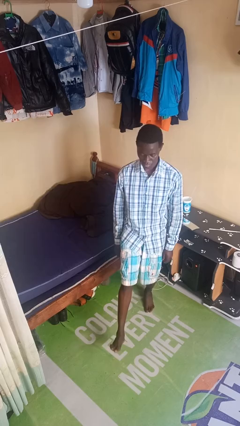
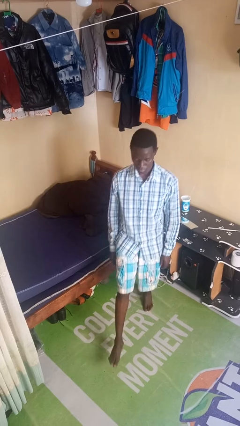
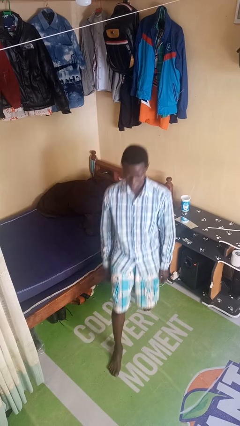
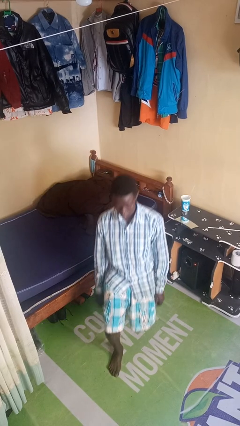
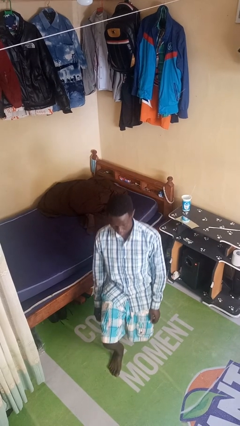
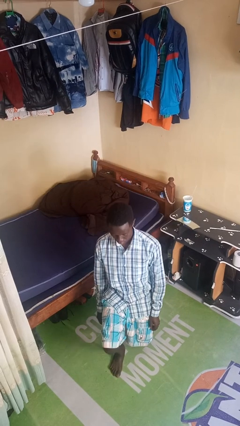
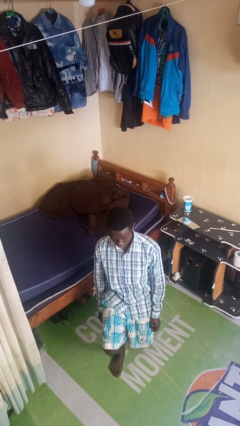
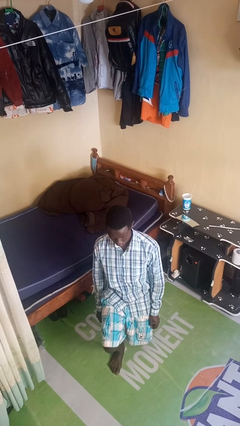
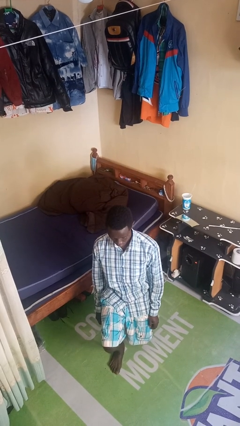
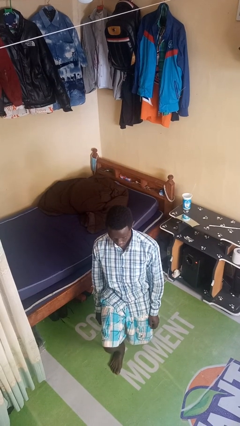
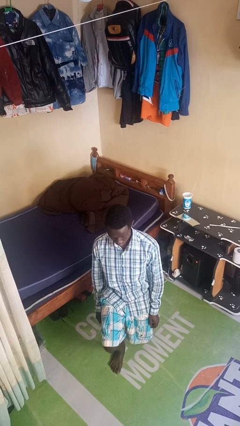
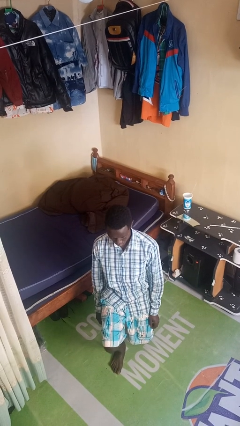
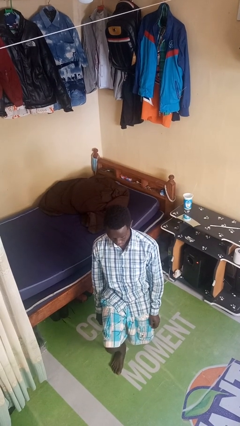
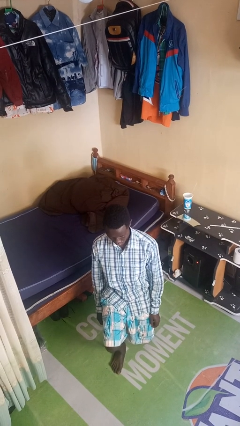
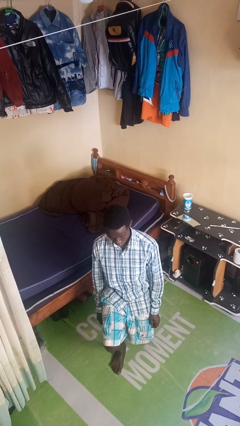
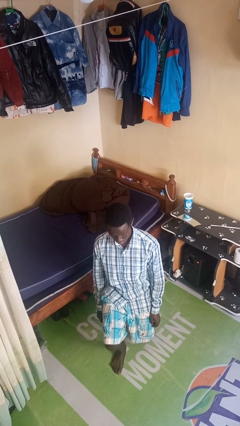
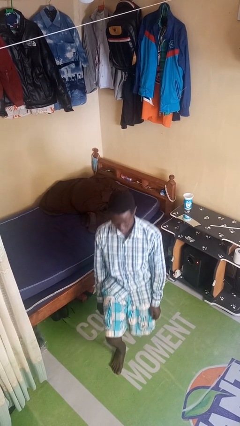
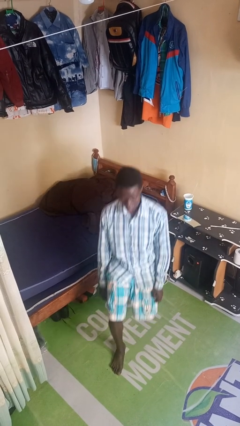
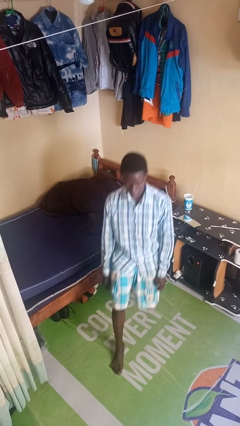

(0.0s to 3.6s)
person exercises with lunges

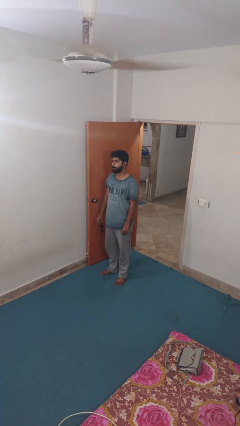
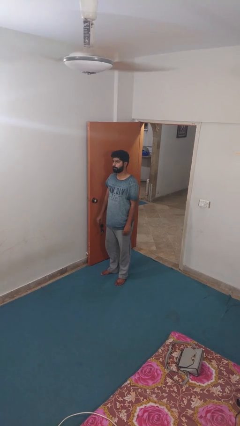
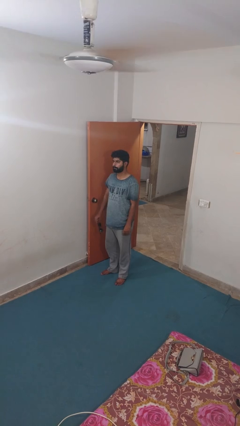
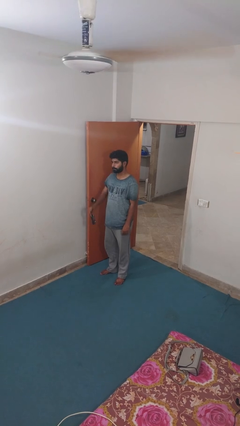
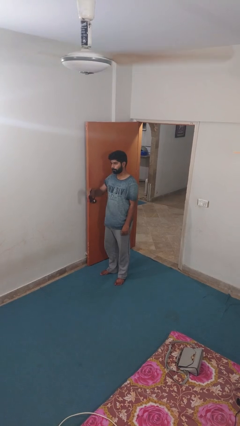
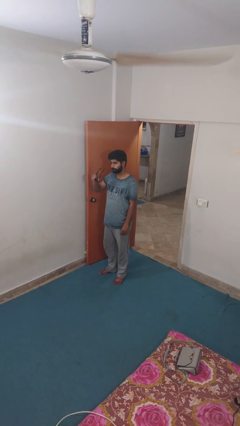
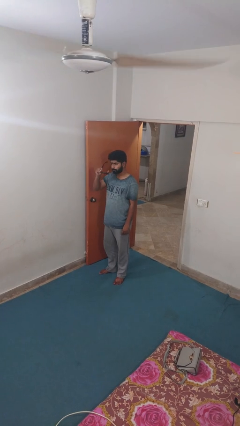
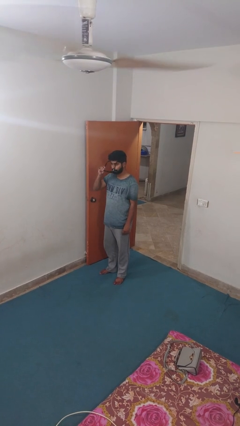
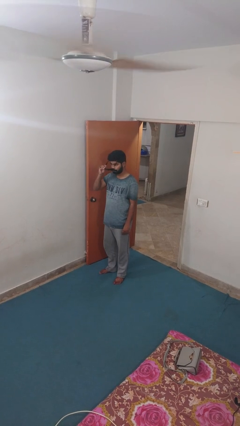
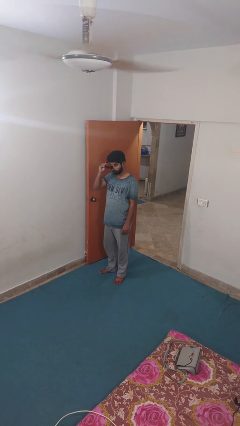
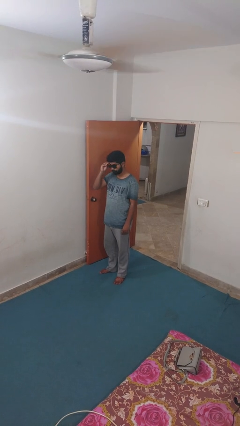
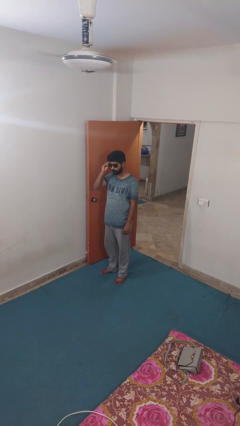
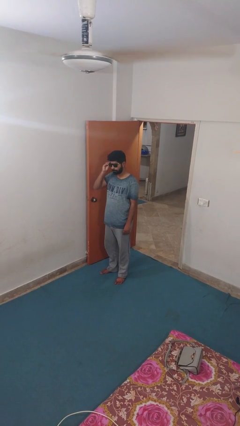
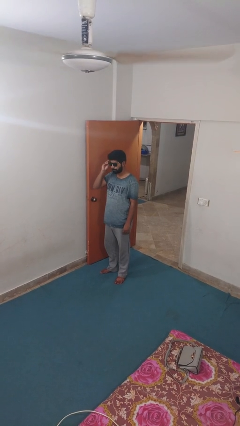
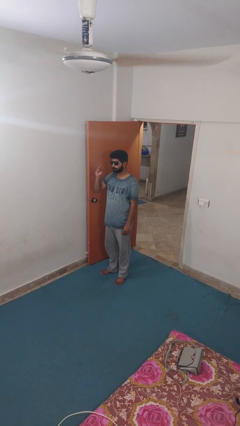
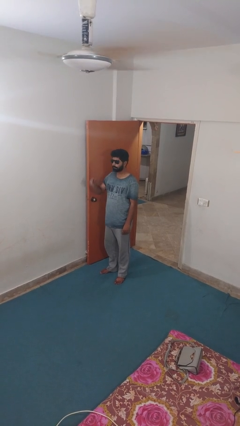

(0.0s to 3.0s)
person puts on sunglasses

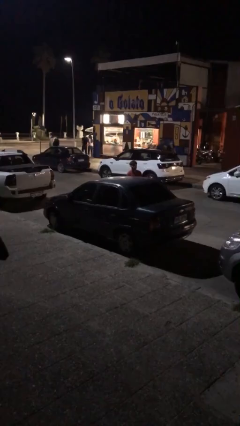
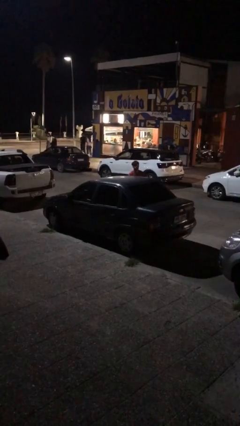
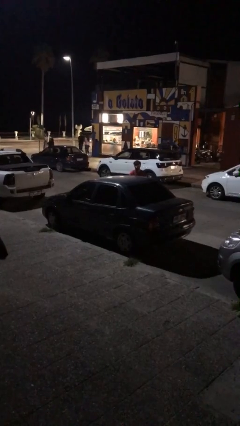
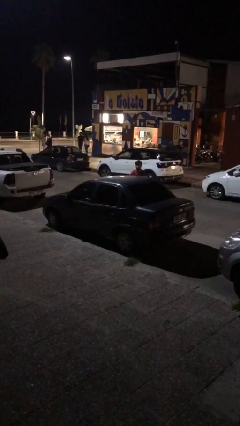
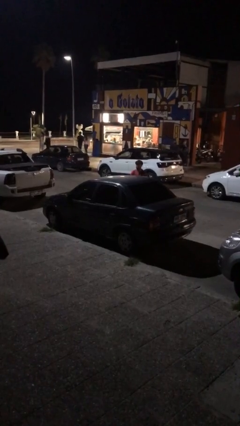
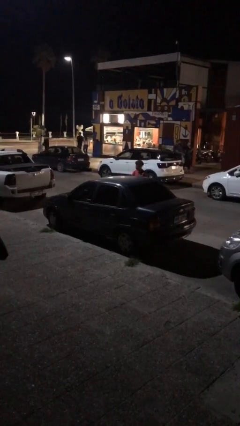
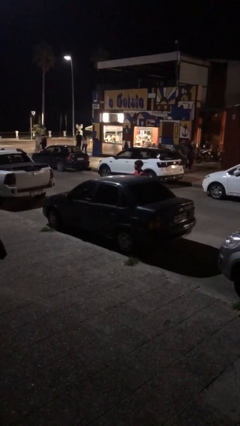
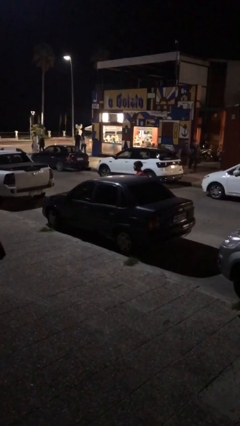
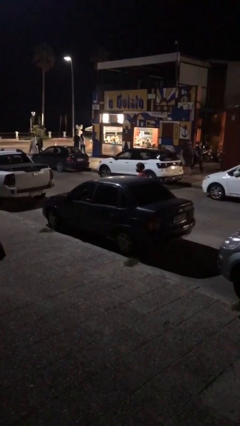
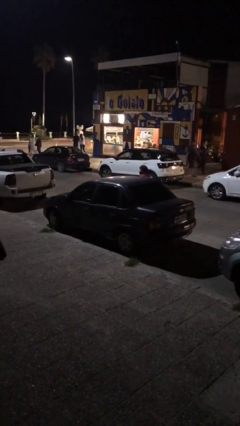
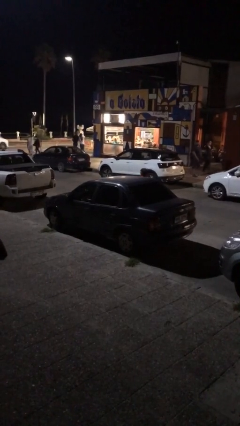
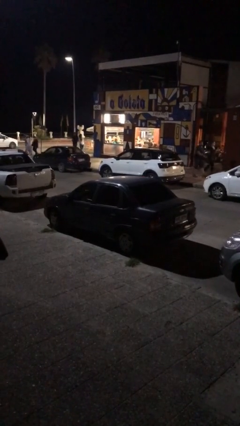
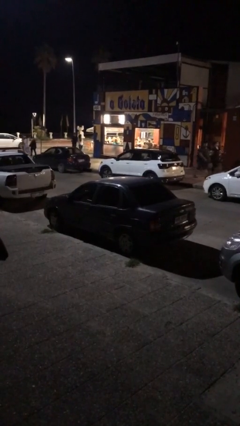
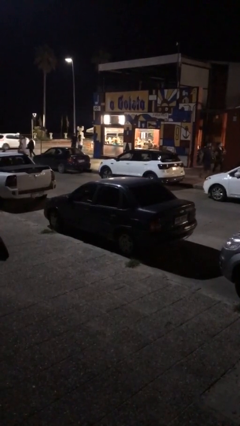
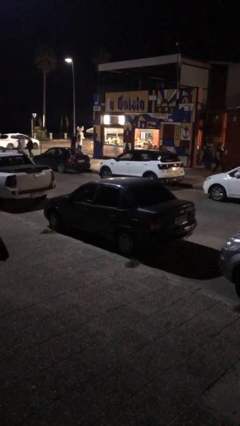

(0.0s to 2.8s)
car picks up person

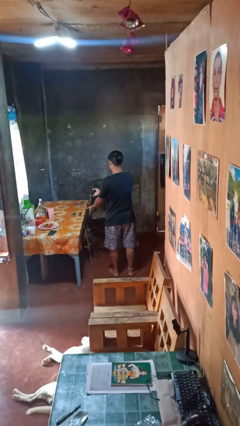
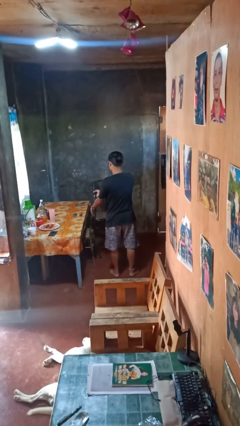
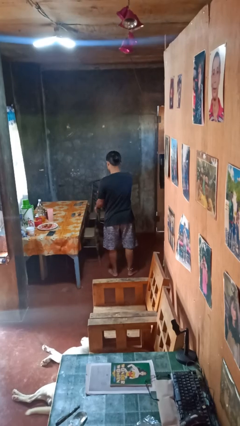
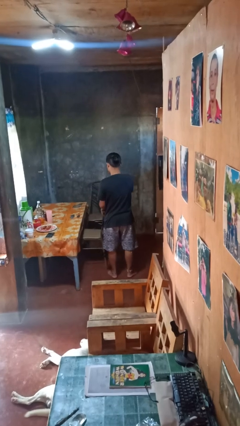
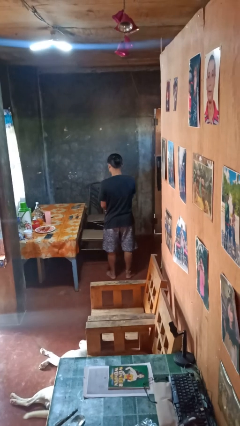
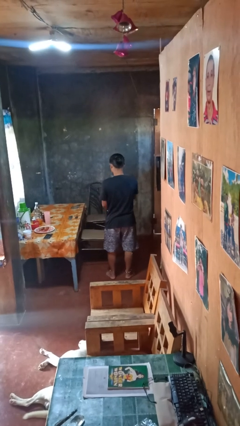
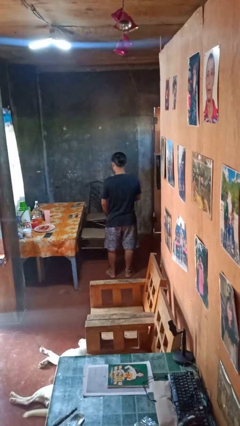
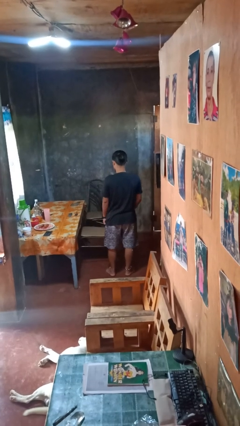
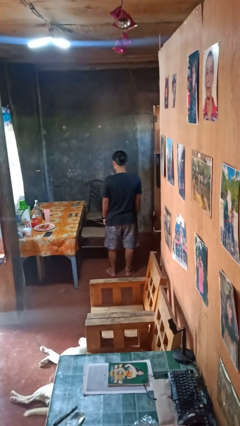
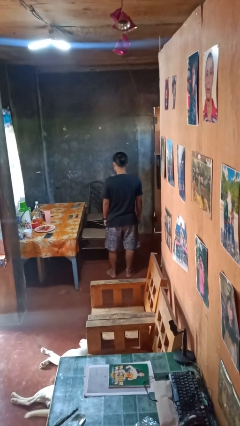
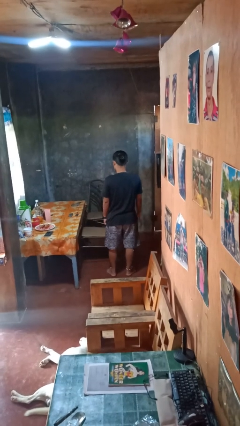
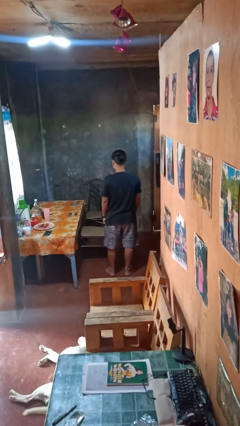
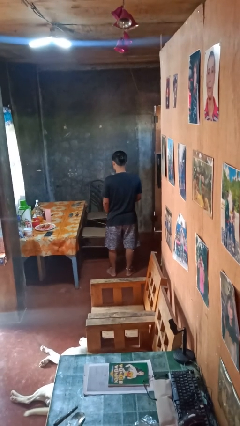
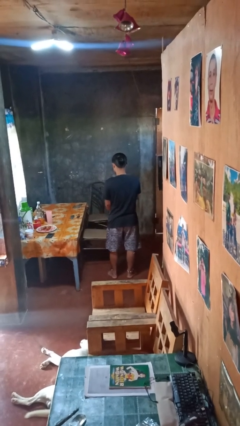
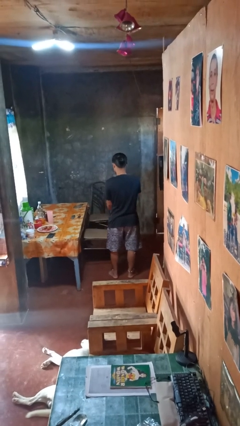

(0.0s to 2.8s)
person pulls out chair

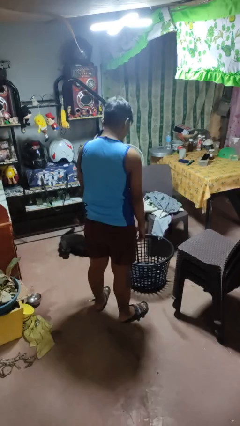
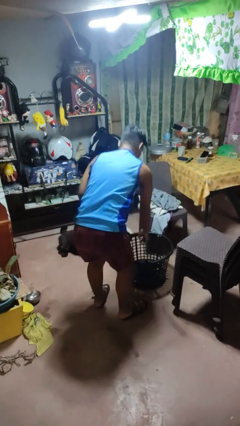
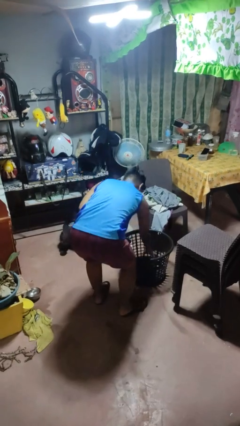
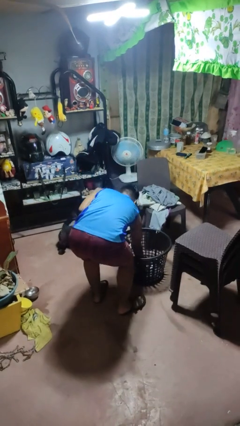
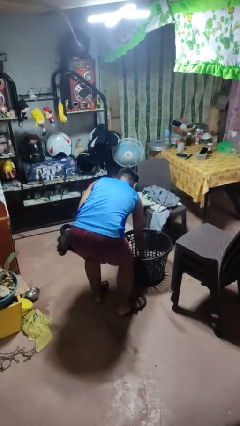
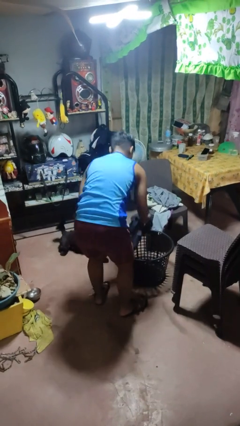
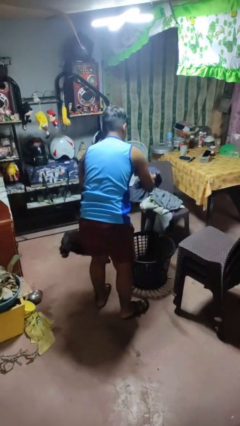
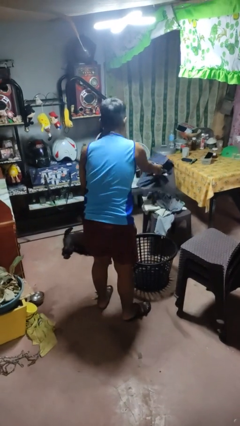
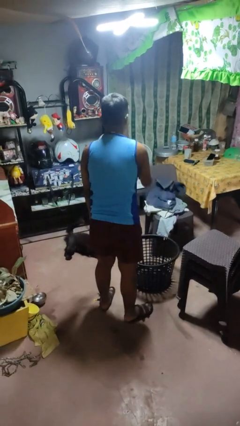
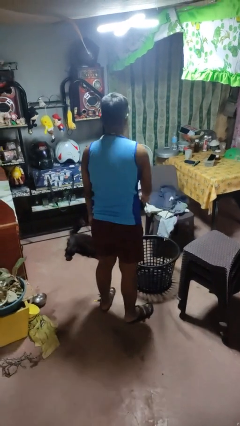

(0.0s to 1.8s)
person takes object from basket

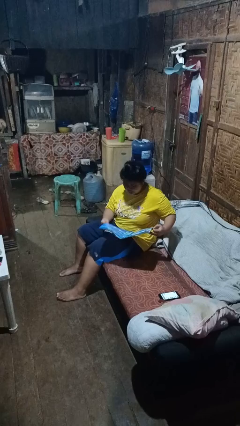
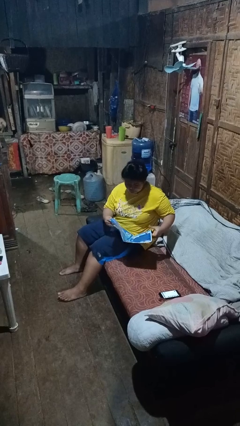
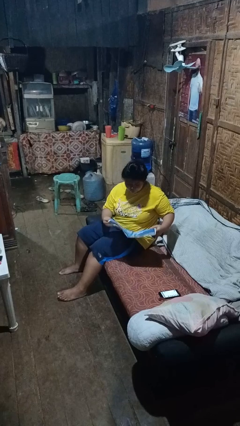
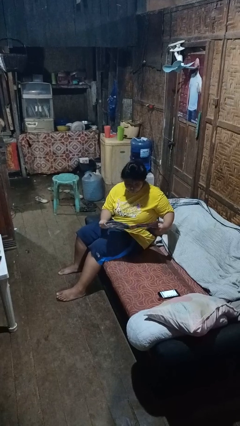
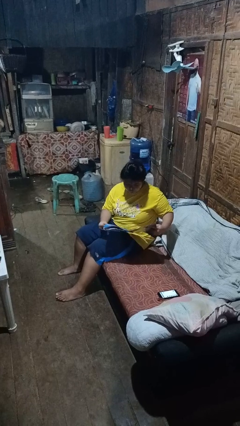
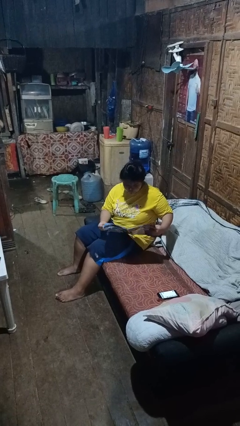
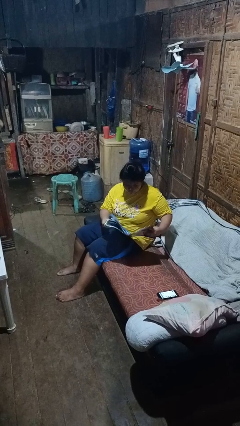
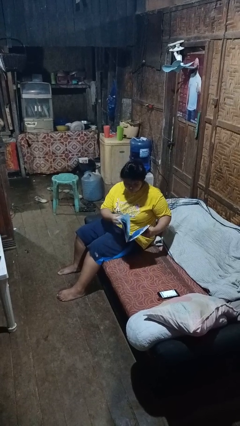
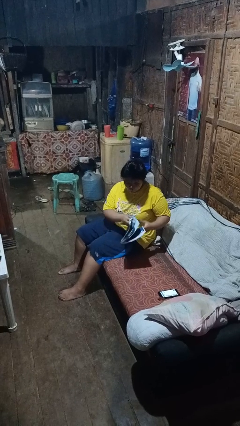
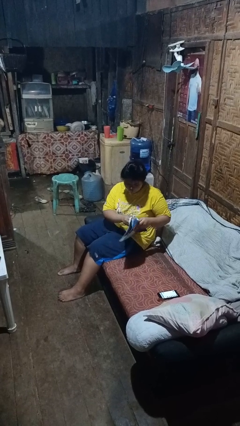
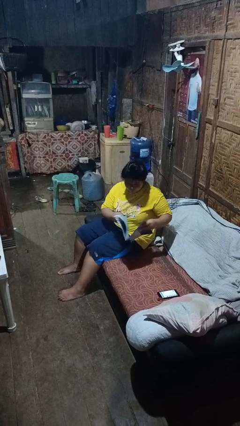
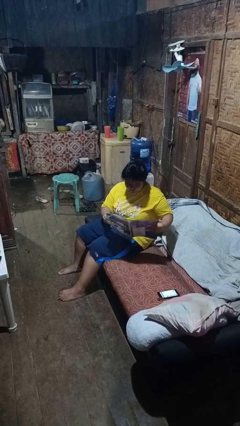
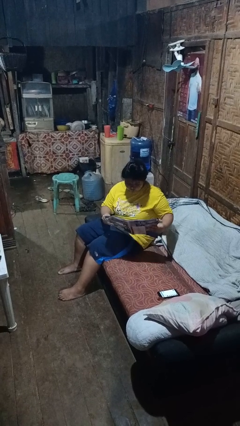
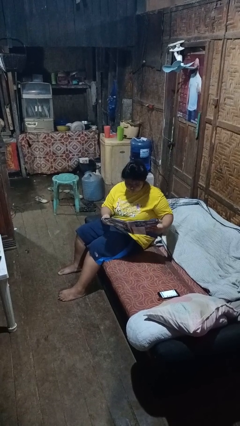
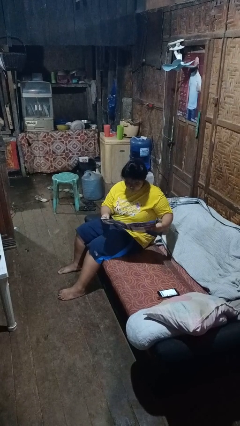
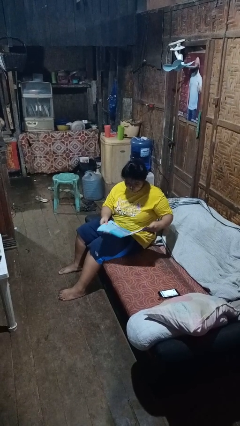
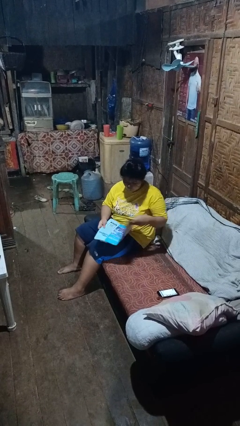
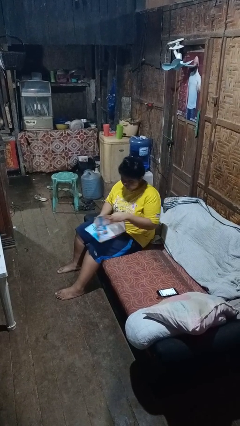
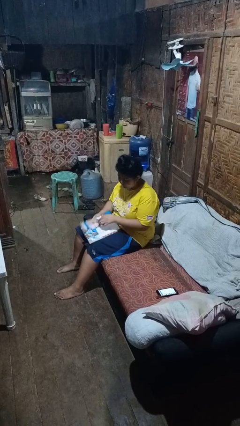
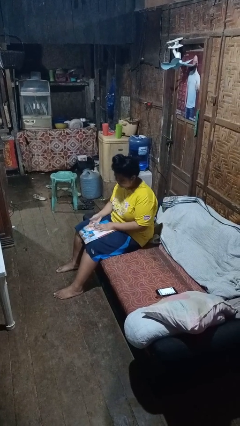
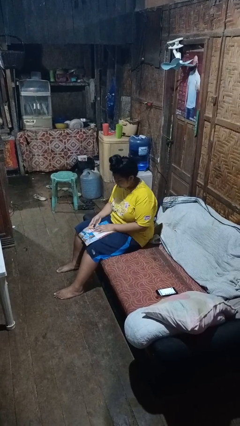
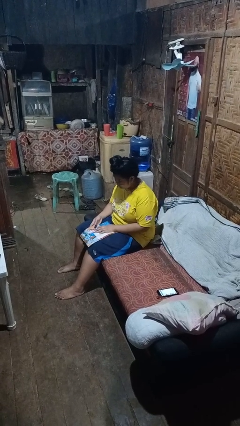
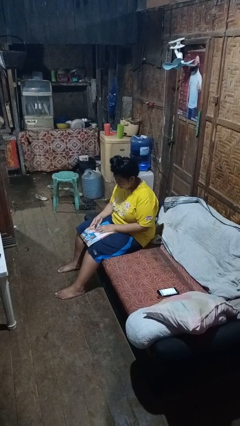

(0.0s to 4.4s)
person reads magazine
